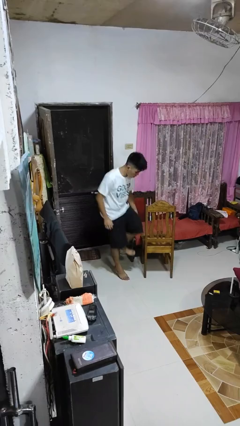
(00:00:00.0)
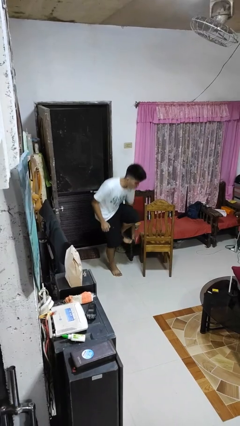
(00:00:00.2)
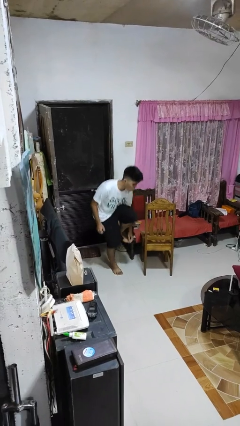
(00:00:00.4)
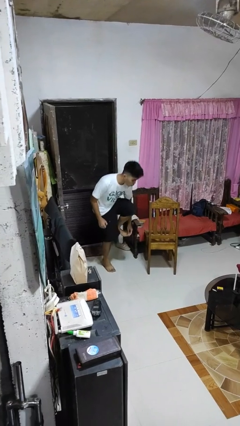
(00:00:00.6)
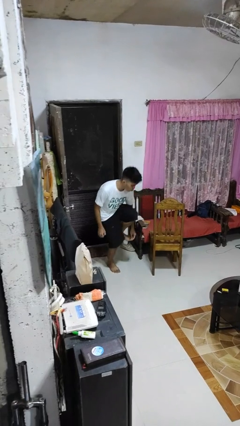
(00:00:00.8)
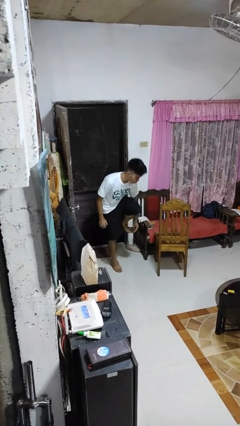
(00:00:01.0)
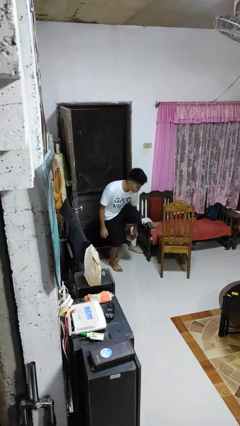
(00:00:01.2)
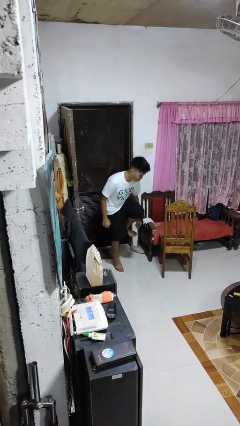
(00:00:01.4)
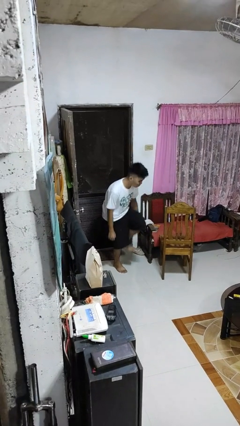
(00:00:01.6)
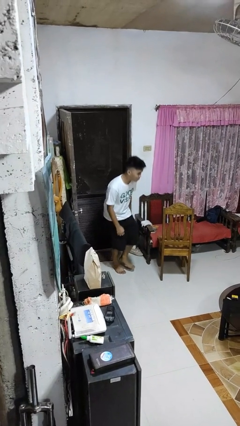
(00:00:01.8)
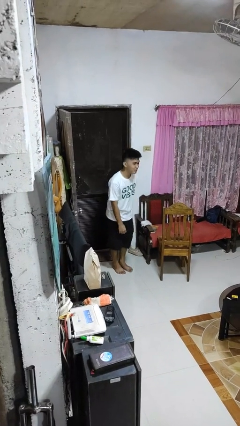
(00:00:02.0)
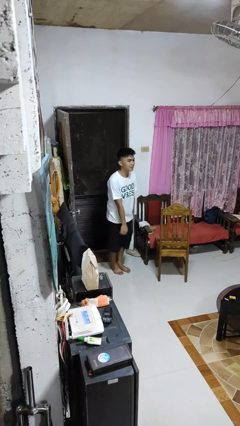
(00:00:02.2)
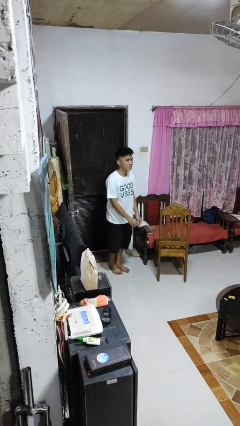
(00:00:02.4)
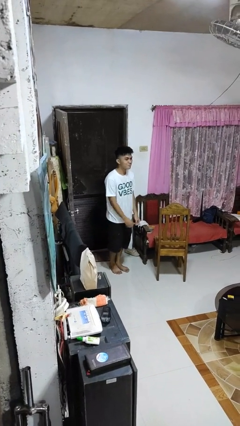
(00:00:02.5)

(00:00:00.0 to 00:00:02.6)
person stubs toe

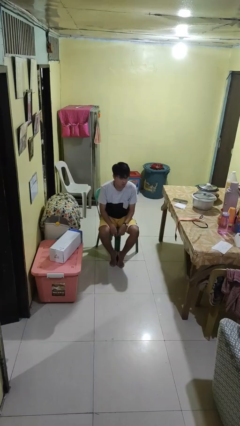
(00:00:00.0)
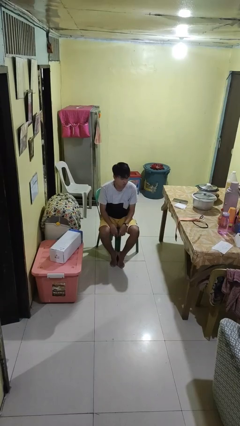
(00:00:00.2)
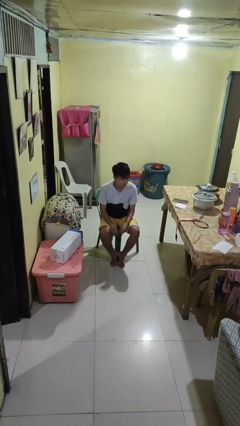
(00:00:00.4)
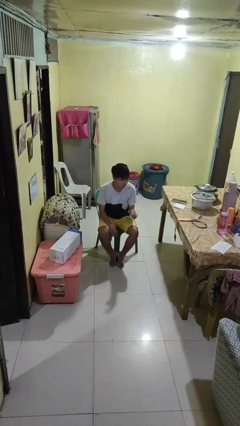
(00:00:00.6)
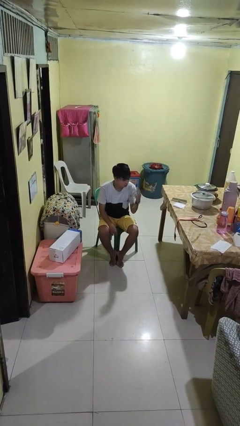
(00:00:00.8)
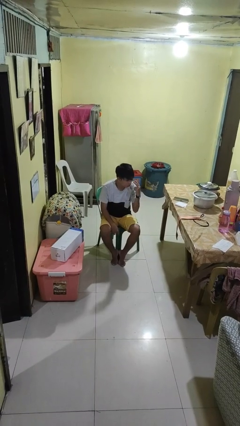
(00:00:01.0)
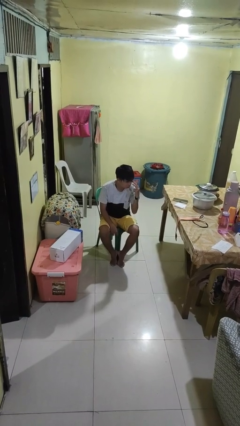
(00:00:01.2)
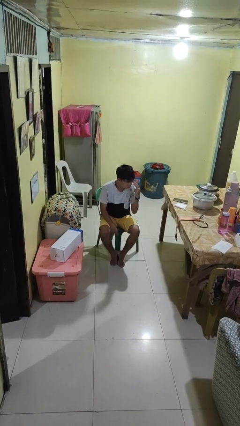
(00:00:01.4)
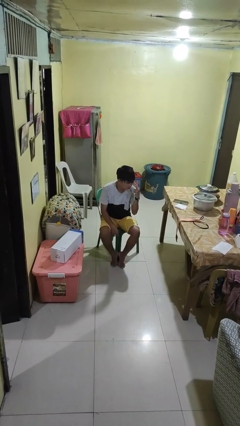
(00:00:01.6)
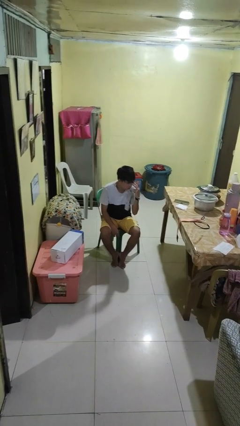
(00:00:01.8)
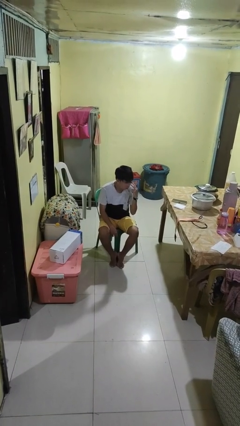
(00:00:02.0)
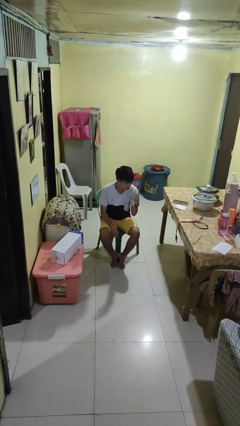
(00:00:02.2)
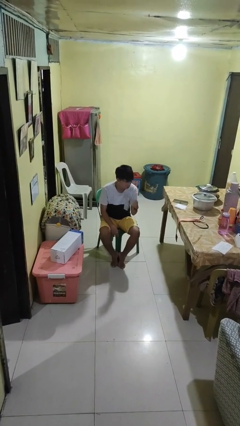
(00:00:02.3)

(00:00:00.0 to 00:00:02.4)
person gestures watch closely

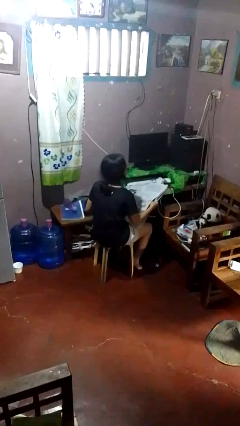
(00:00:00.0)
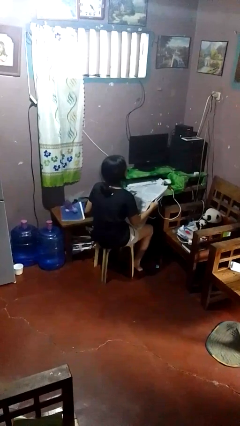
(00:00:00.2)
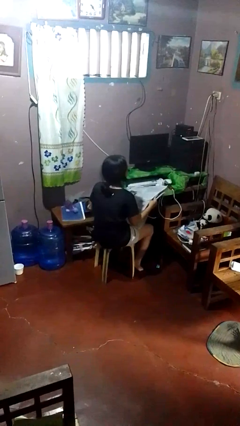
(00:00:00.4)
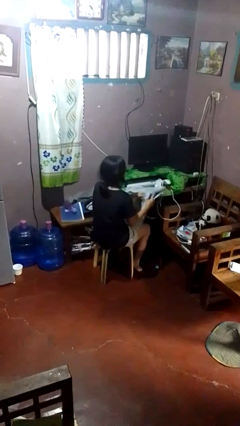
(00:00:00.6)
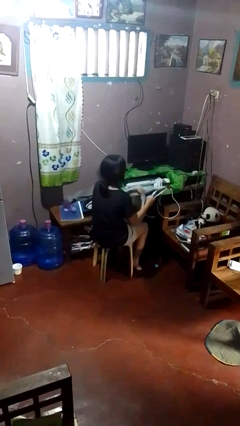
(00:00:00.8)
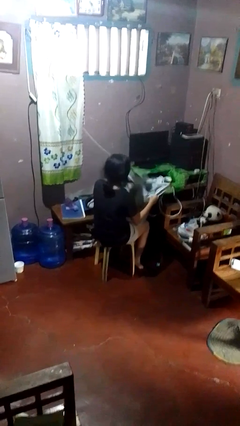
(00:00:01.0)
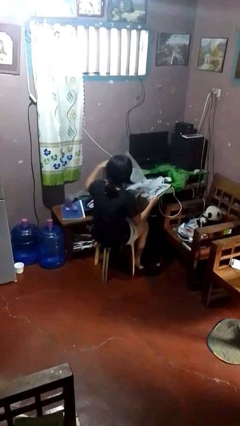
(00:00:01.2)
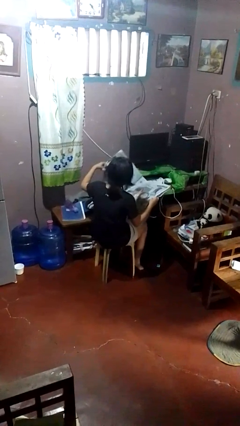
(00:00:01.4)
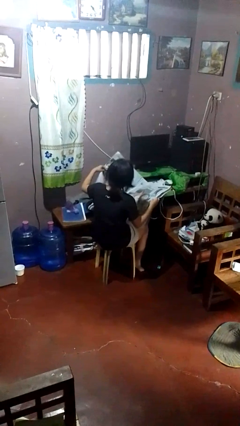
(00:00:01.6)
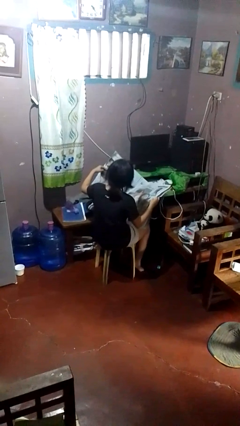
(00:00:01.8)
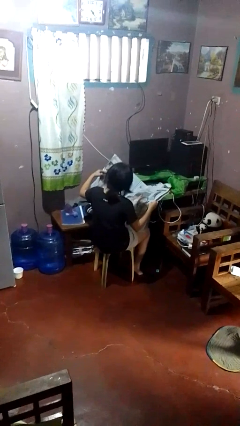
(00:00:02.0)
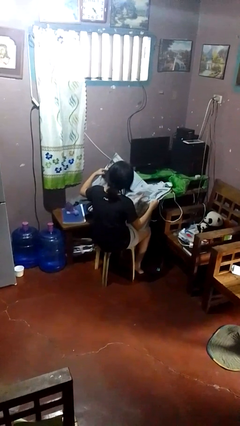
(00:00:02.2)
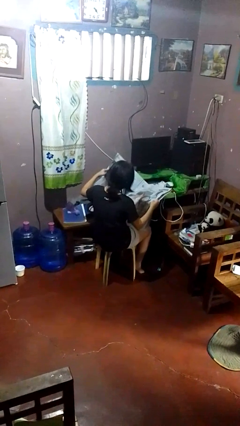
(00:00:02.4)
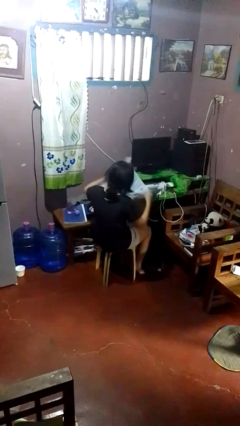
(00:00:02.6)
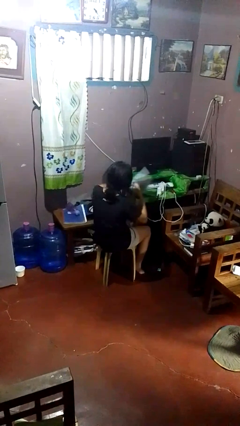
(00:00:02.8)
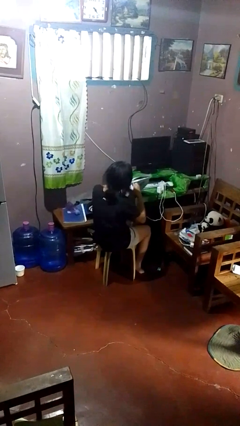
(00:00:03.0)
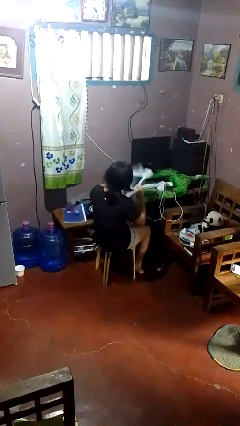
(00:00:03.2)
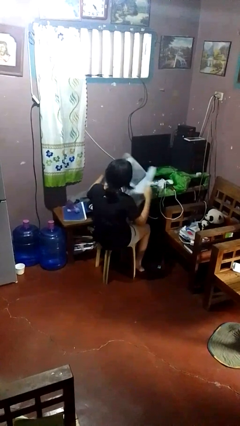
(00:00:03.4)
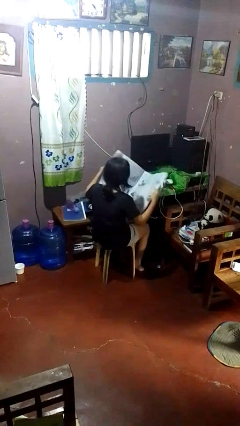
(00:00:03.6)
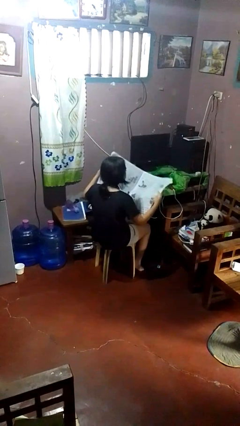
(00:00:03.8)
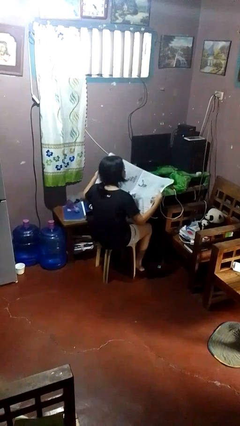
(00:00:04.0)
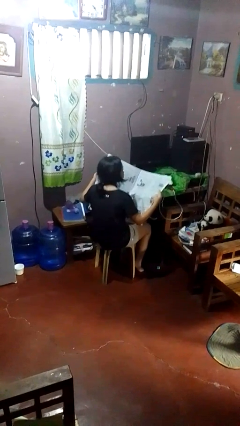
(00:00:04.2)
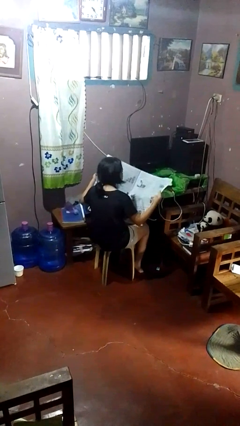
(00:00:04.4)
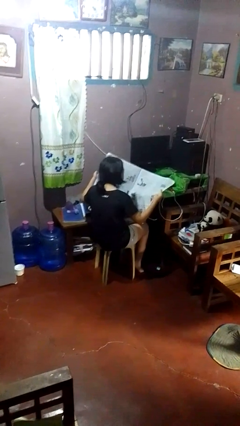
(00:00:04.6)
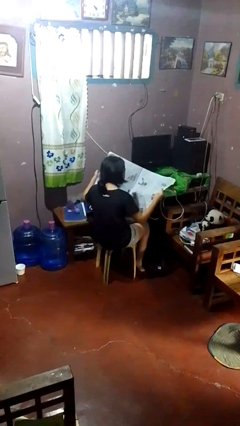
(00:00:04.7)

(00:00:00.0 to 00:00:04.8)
person reads newspaper

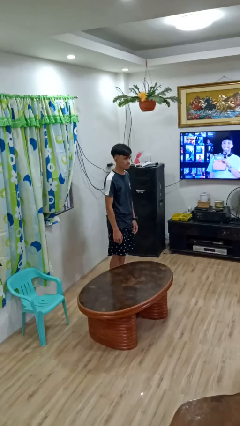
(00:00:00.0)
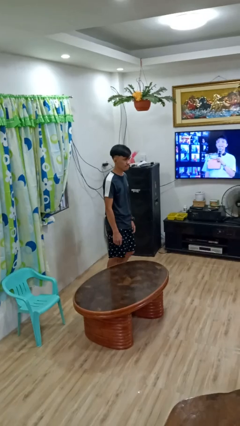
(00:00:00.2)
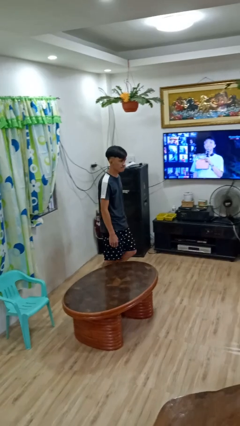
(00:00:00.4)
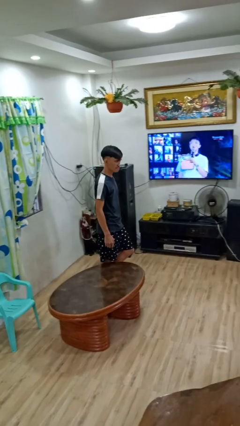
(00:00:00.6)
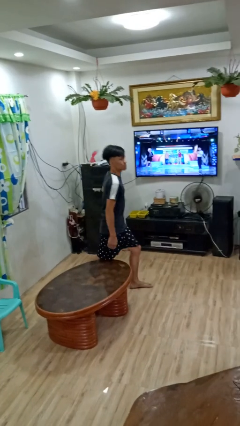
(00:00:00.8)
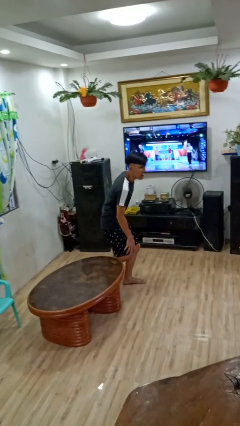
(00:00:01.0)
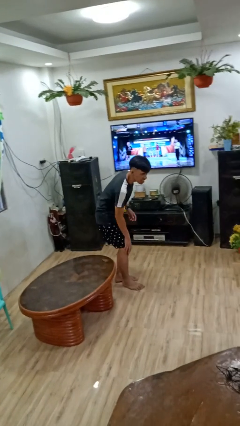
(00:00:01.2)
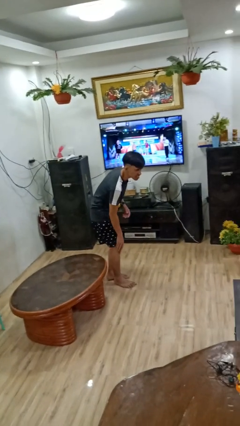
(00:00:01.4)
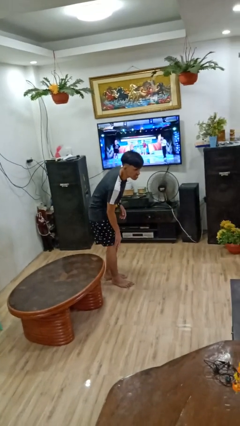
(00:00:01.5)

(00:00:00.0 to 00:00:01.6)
person bumps into table

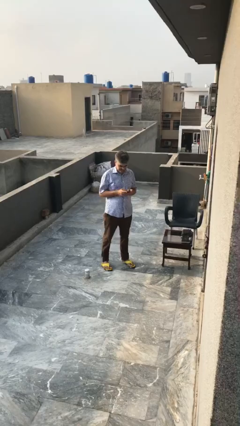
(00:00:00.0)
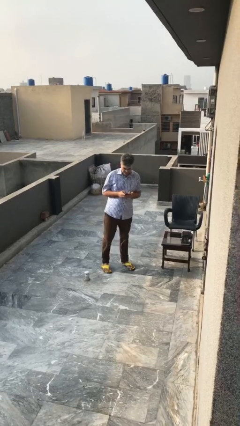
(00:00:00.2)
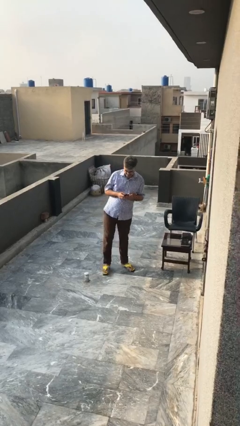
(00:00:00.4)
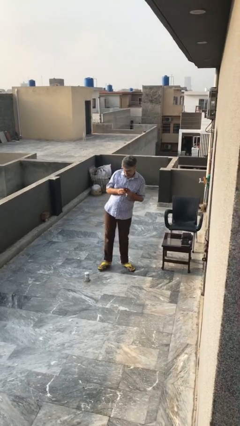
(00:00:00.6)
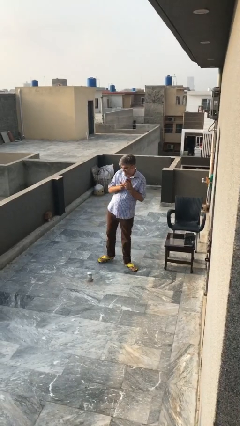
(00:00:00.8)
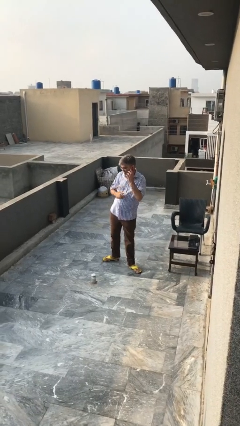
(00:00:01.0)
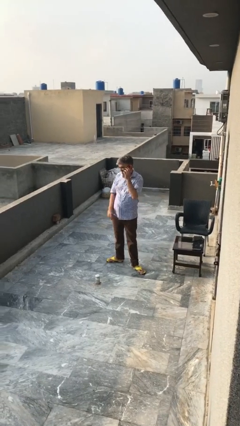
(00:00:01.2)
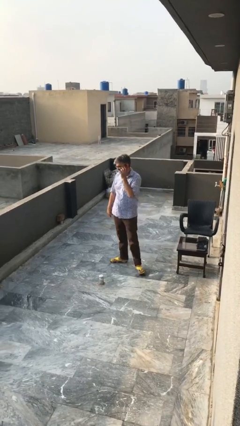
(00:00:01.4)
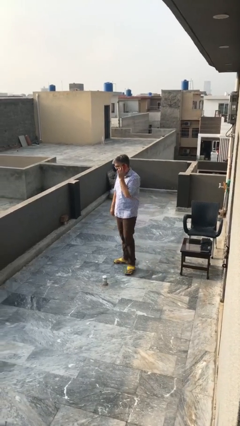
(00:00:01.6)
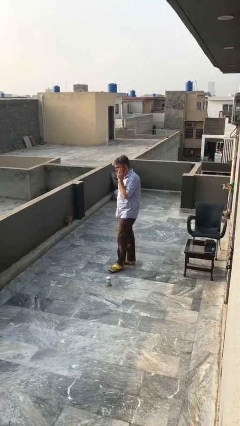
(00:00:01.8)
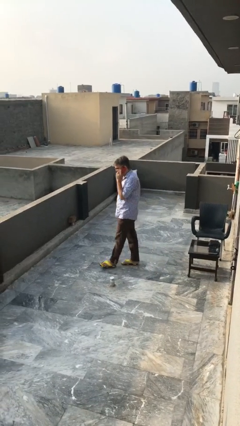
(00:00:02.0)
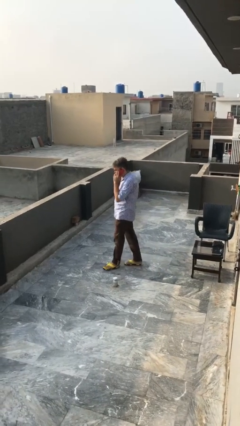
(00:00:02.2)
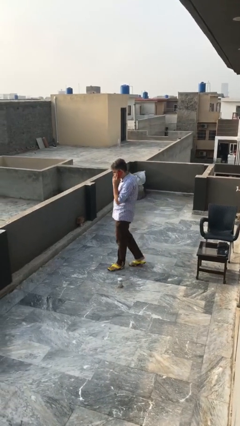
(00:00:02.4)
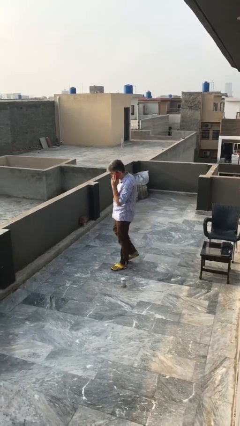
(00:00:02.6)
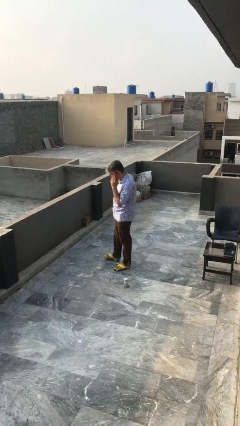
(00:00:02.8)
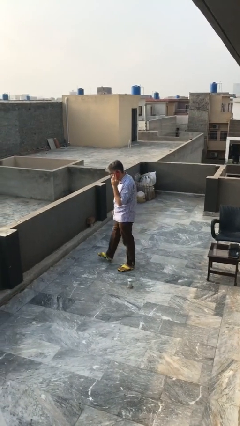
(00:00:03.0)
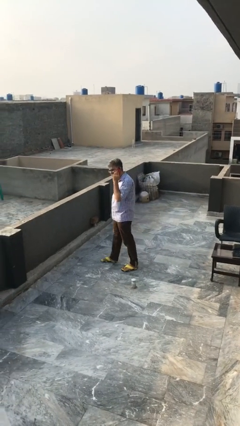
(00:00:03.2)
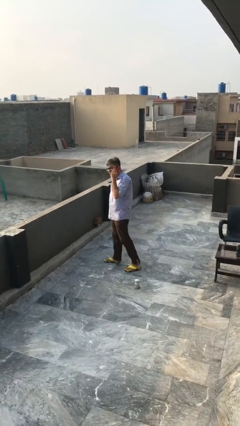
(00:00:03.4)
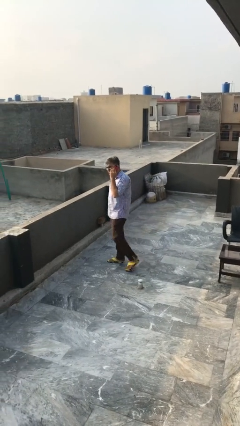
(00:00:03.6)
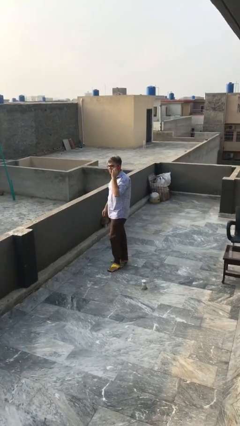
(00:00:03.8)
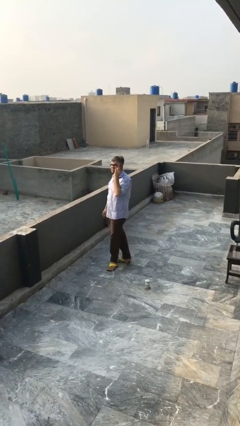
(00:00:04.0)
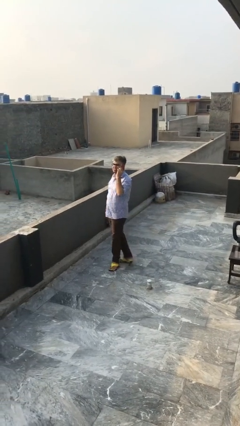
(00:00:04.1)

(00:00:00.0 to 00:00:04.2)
person talks on phone

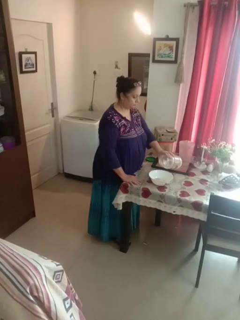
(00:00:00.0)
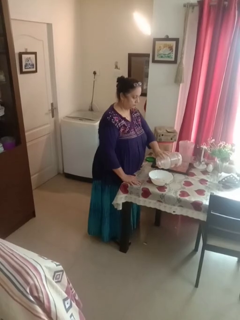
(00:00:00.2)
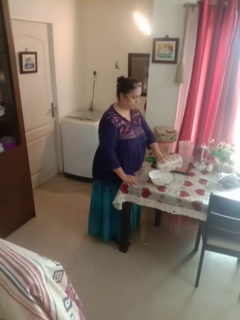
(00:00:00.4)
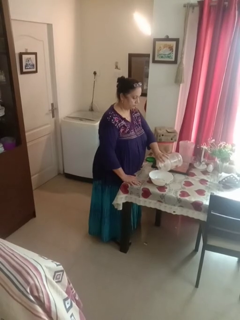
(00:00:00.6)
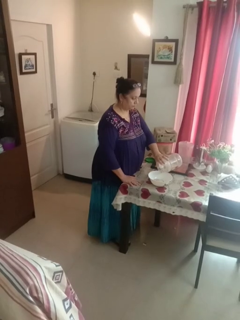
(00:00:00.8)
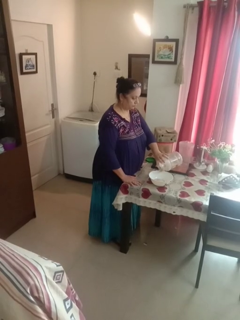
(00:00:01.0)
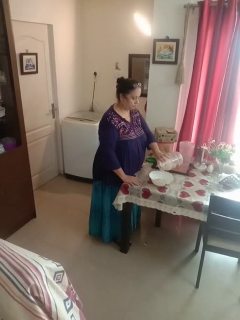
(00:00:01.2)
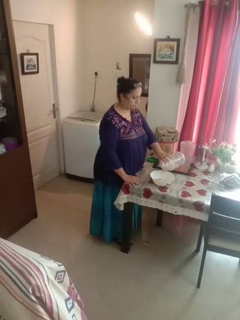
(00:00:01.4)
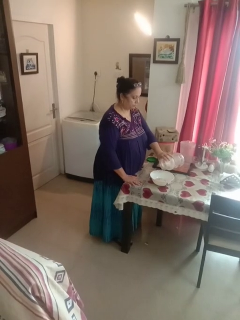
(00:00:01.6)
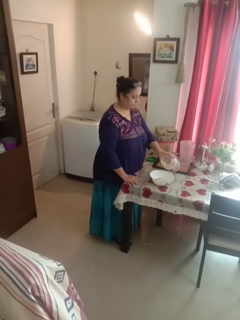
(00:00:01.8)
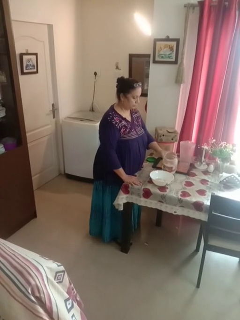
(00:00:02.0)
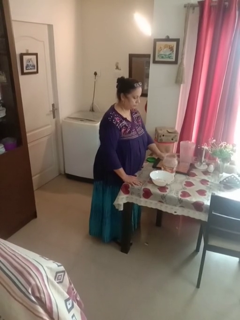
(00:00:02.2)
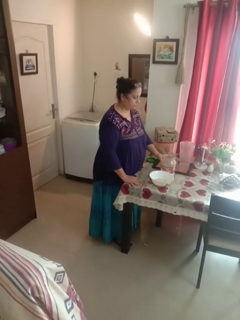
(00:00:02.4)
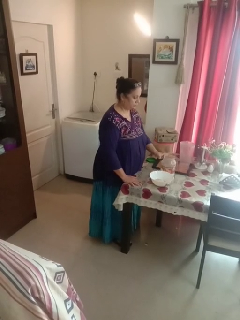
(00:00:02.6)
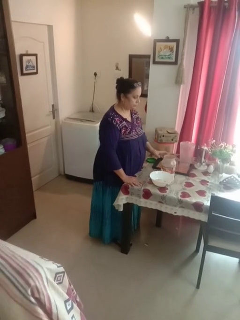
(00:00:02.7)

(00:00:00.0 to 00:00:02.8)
person pours into bowl
